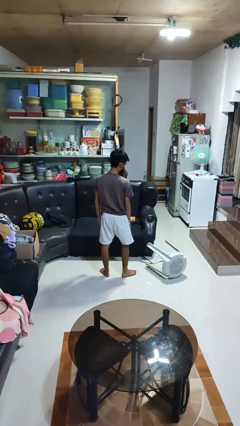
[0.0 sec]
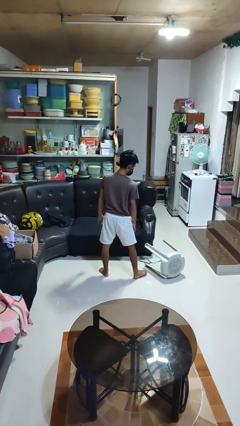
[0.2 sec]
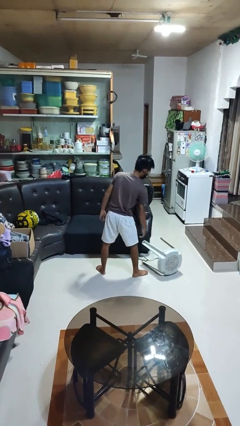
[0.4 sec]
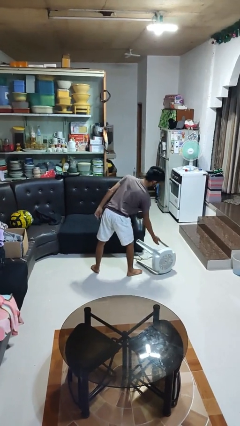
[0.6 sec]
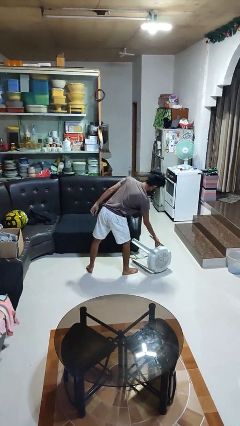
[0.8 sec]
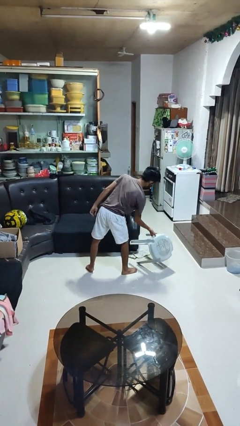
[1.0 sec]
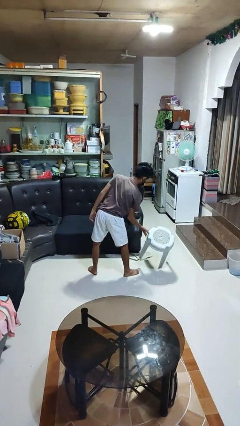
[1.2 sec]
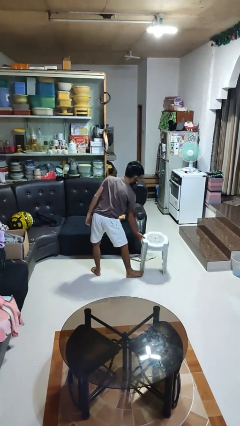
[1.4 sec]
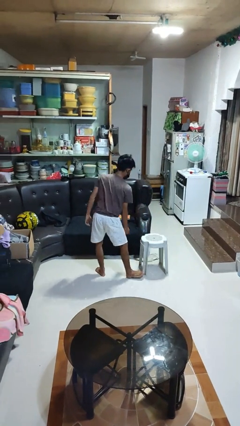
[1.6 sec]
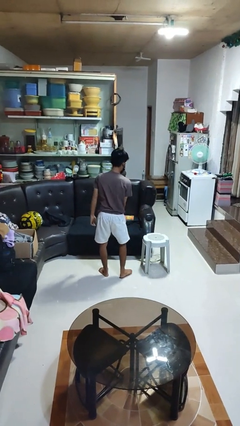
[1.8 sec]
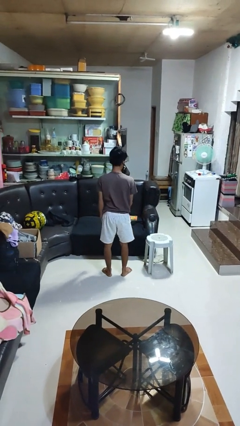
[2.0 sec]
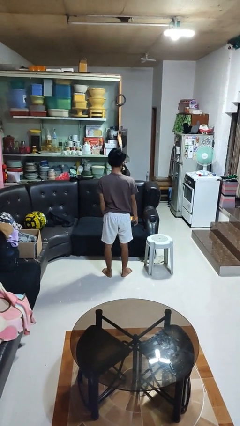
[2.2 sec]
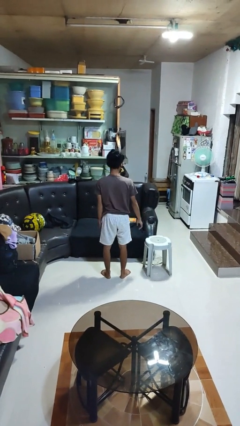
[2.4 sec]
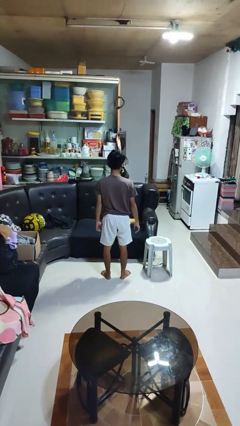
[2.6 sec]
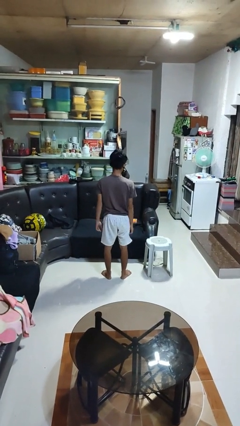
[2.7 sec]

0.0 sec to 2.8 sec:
person sets upright furniture

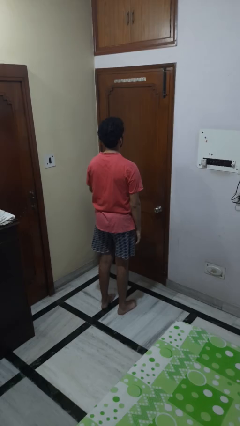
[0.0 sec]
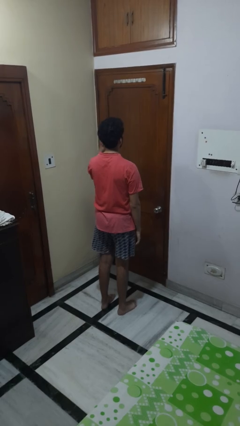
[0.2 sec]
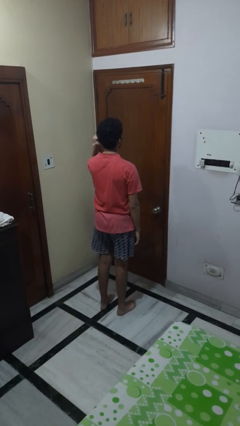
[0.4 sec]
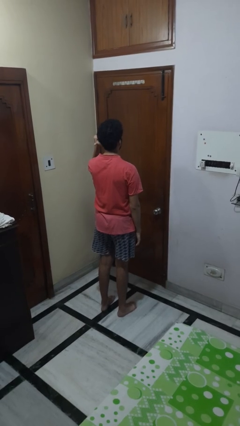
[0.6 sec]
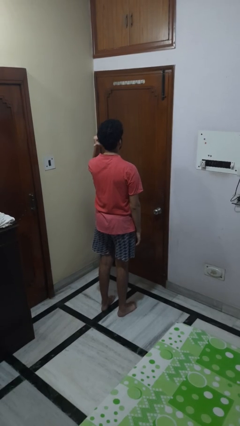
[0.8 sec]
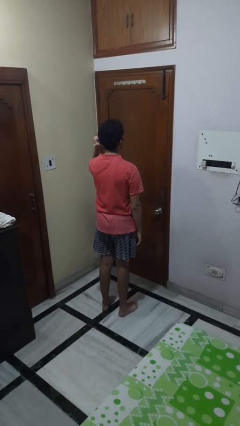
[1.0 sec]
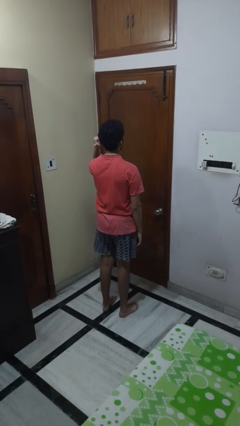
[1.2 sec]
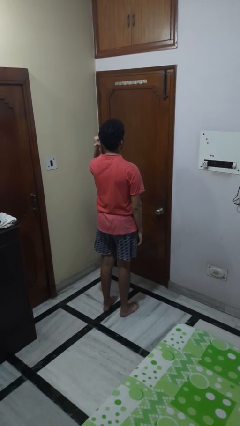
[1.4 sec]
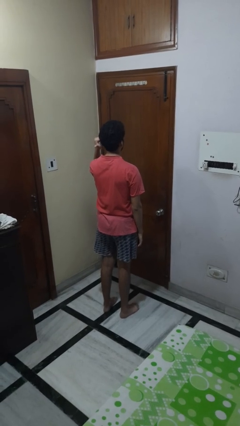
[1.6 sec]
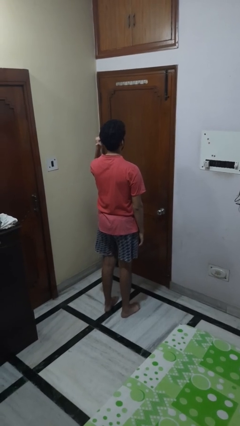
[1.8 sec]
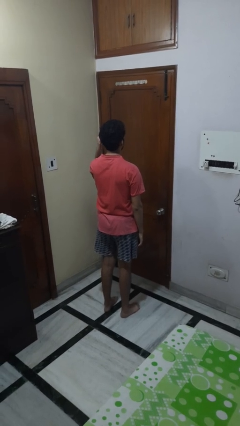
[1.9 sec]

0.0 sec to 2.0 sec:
person gestures behind me

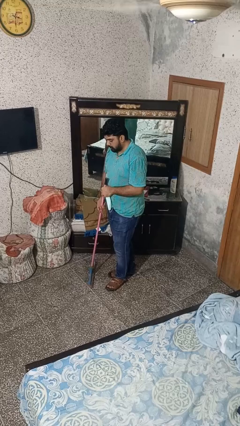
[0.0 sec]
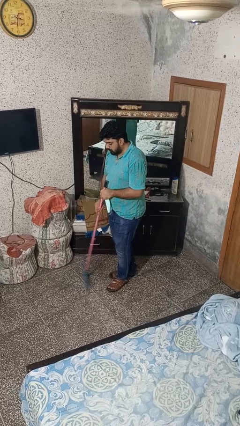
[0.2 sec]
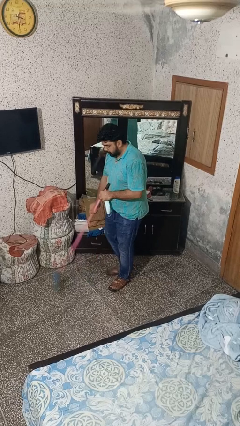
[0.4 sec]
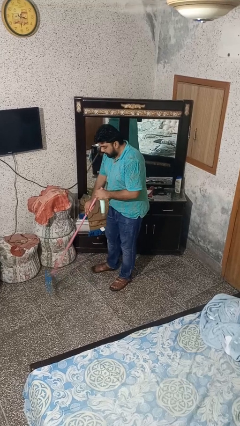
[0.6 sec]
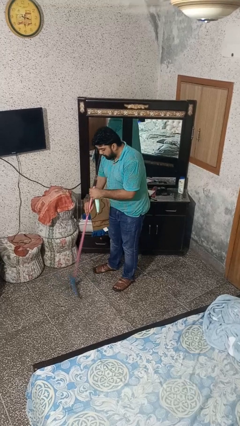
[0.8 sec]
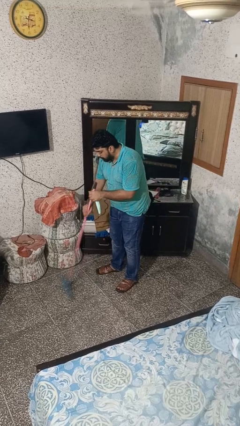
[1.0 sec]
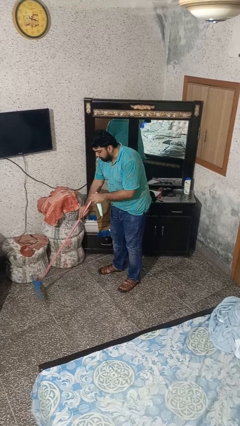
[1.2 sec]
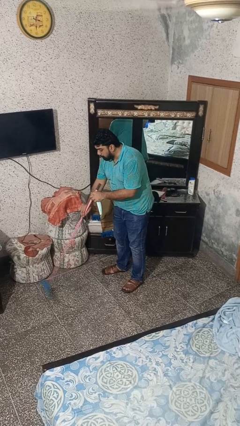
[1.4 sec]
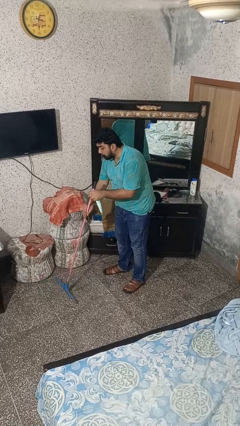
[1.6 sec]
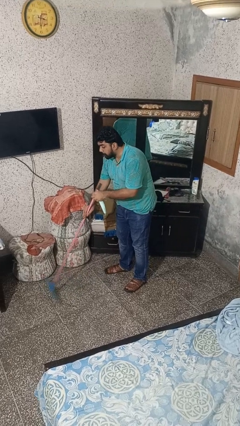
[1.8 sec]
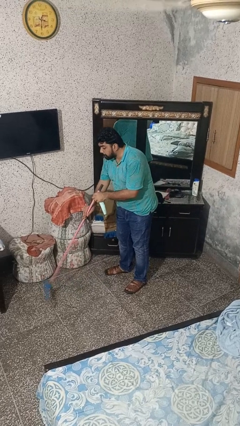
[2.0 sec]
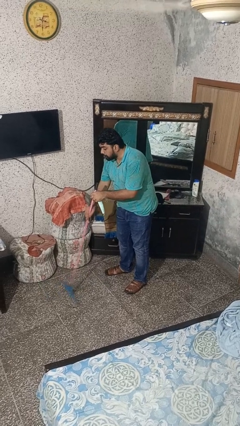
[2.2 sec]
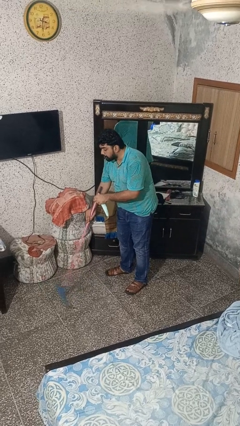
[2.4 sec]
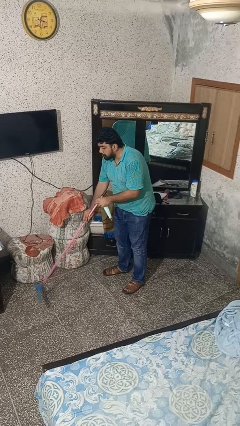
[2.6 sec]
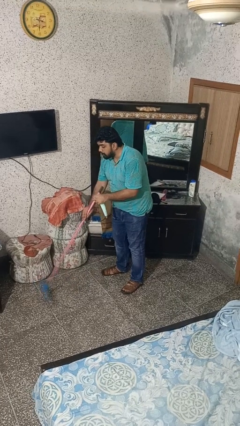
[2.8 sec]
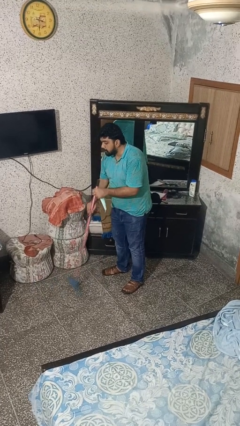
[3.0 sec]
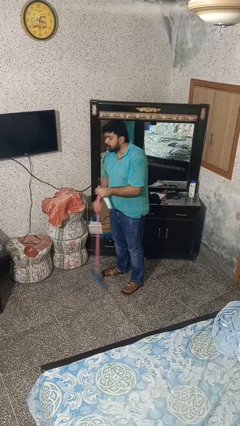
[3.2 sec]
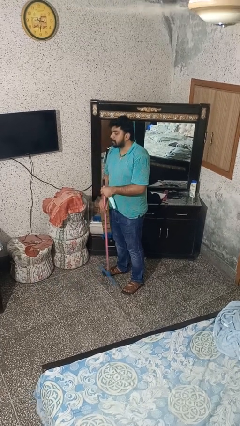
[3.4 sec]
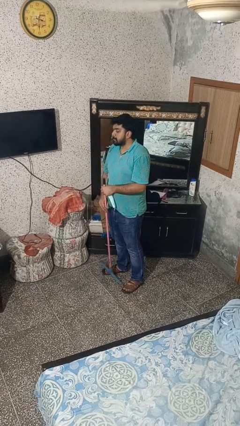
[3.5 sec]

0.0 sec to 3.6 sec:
person sweeps floor

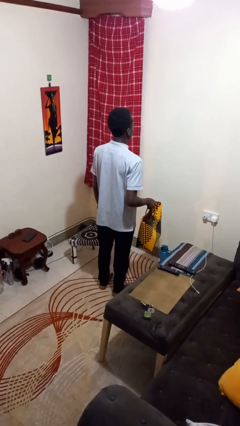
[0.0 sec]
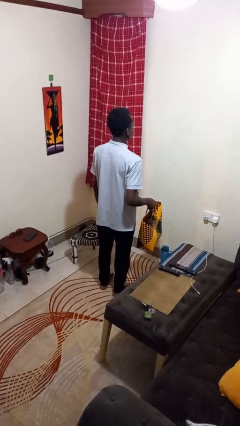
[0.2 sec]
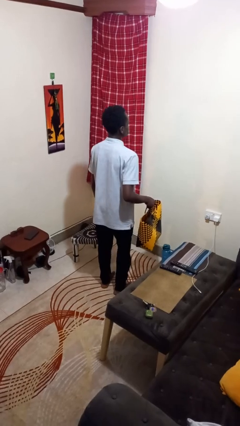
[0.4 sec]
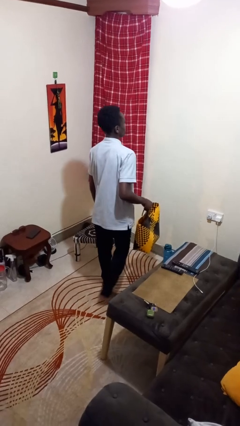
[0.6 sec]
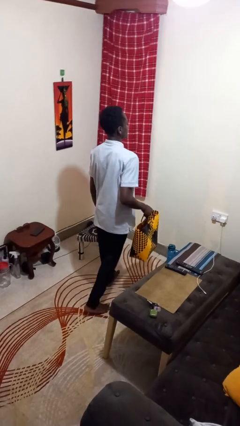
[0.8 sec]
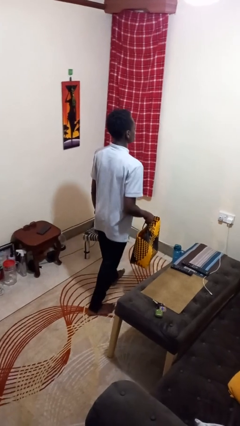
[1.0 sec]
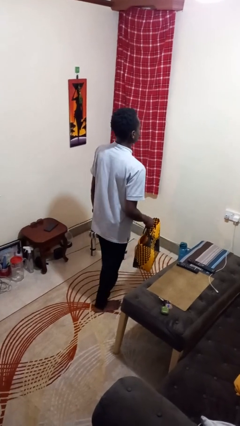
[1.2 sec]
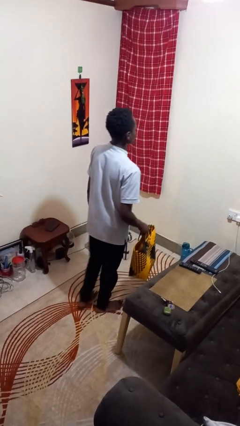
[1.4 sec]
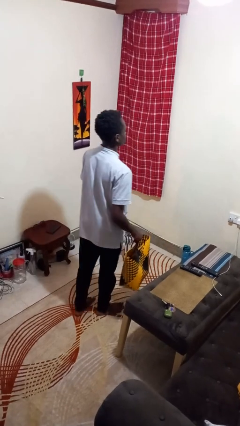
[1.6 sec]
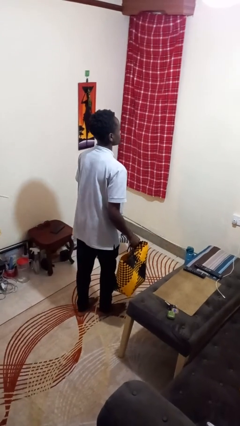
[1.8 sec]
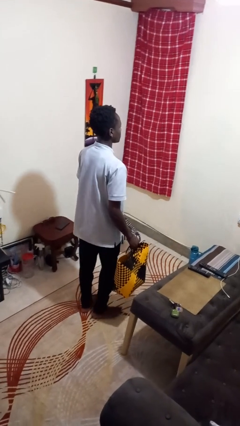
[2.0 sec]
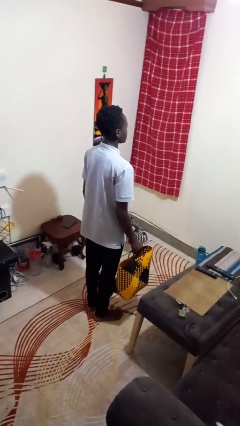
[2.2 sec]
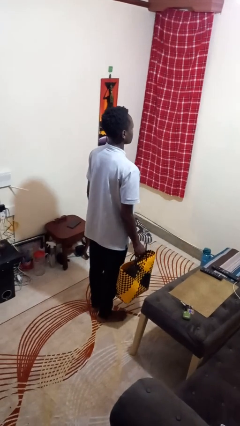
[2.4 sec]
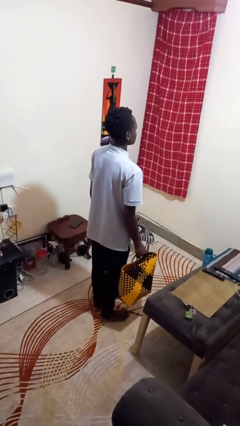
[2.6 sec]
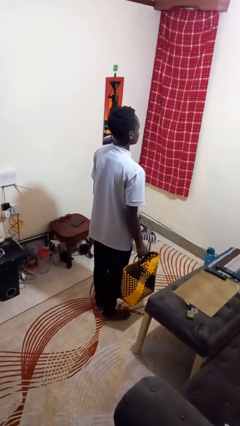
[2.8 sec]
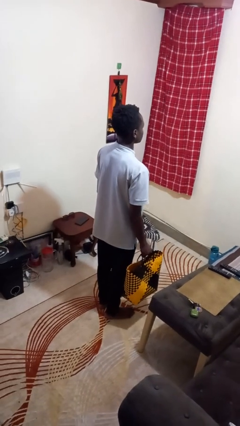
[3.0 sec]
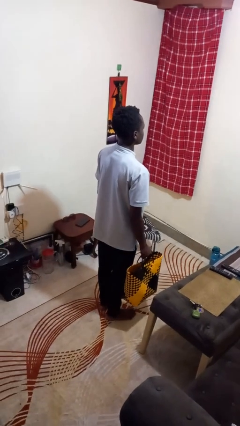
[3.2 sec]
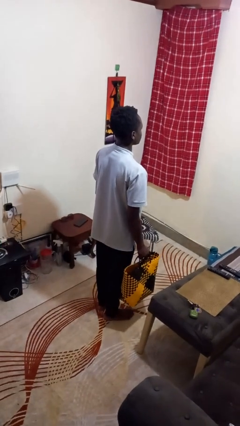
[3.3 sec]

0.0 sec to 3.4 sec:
person carries groceries

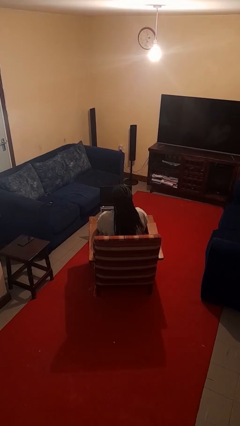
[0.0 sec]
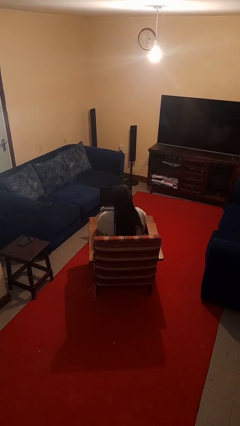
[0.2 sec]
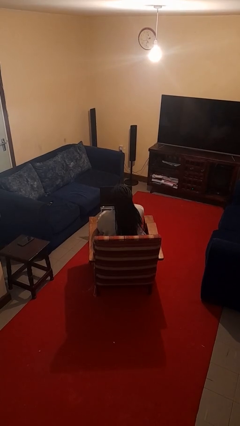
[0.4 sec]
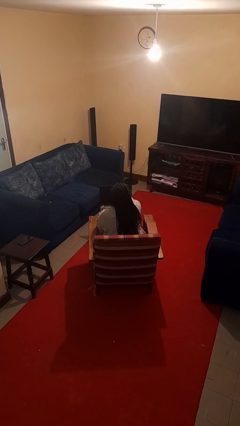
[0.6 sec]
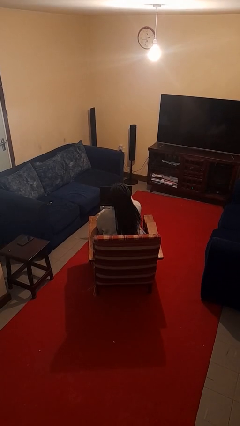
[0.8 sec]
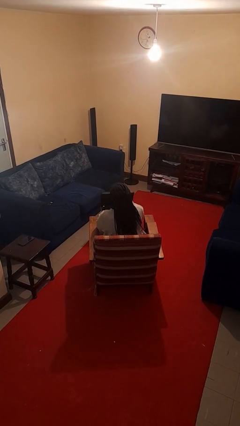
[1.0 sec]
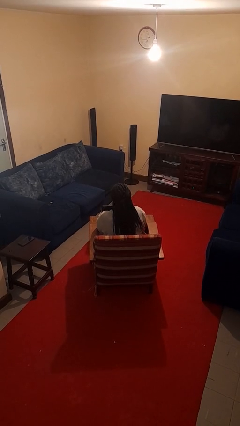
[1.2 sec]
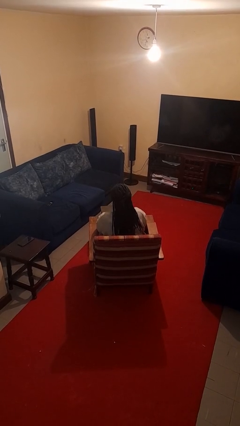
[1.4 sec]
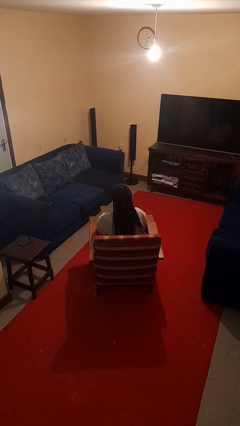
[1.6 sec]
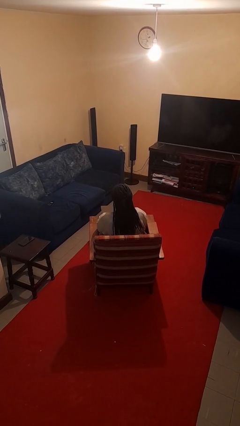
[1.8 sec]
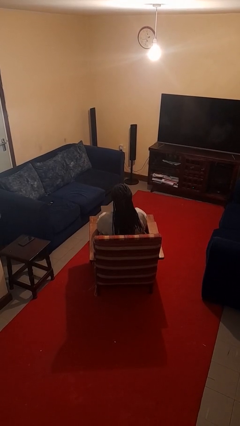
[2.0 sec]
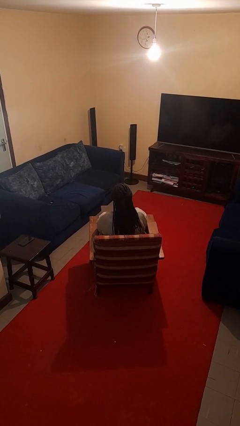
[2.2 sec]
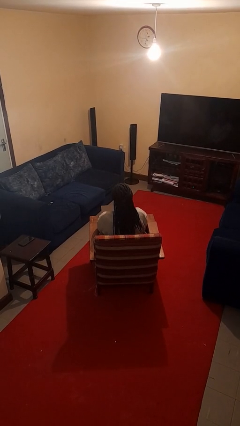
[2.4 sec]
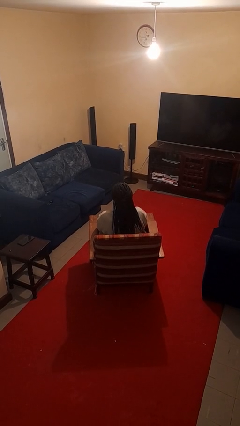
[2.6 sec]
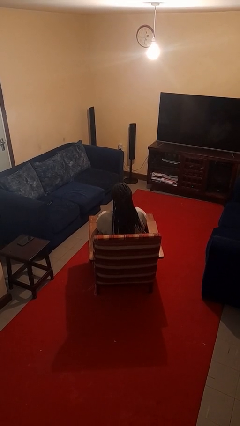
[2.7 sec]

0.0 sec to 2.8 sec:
person closes laptop

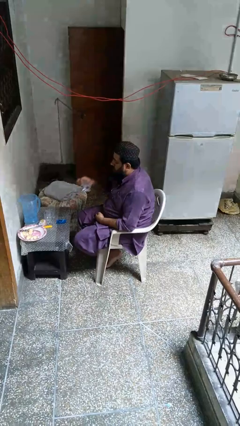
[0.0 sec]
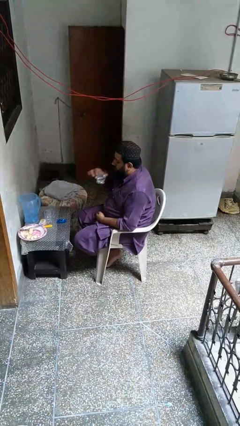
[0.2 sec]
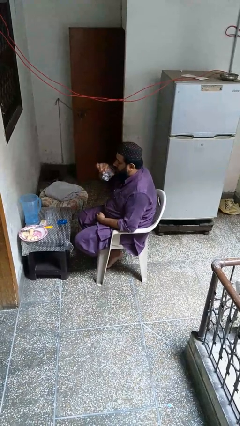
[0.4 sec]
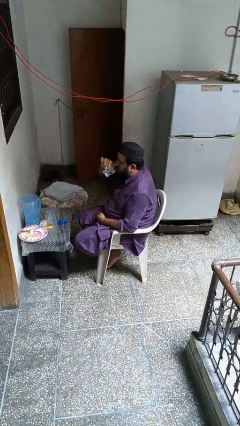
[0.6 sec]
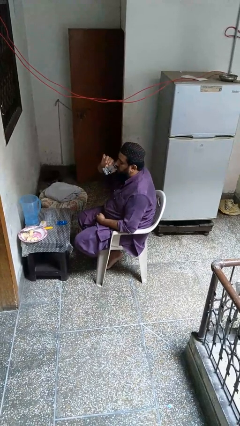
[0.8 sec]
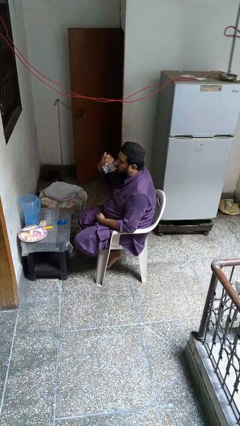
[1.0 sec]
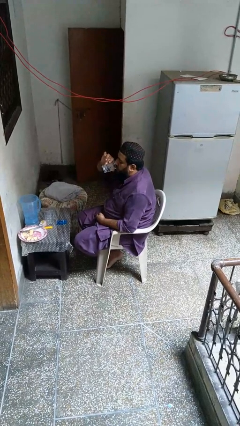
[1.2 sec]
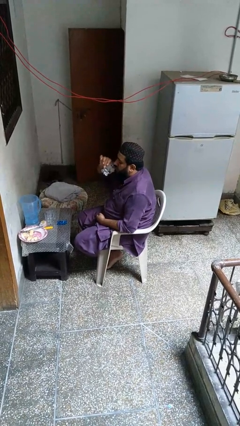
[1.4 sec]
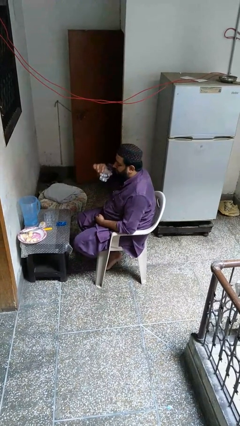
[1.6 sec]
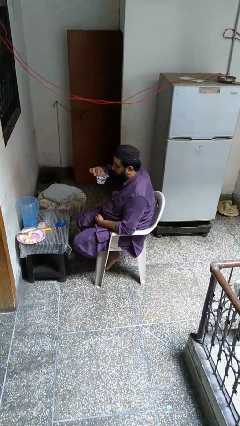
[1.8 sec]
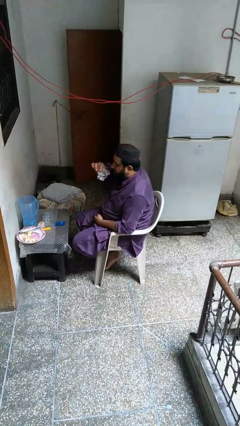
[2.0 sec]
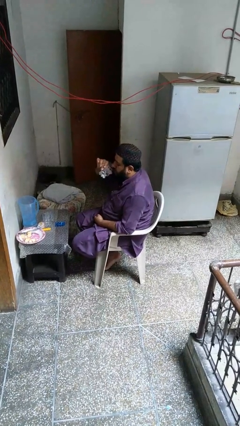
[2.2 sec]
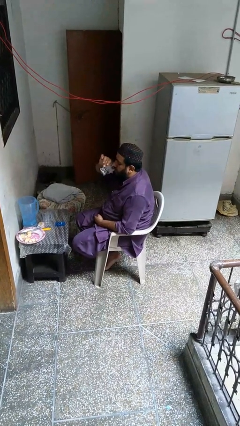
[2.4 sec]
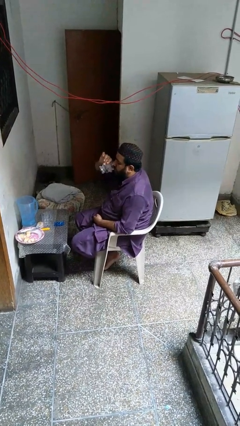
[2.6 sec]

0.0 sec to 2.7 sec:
person drinks from cup
